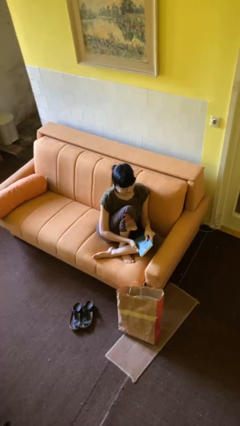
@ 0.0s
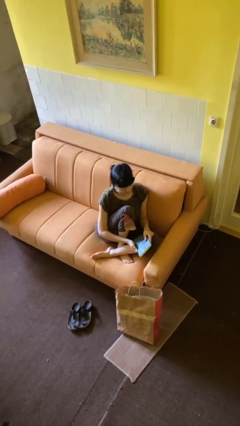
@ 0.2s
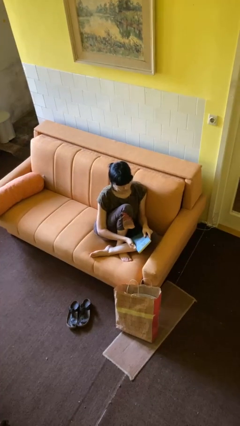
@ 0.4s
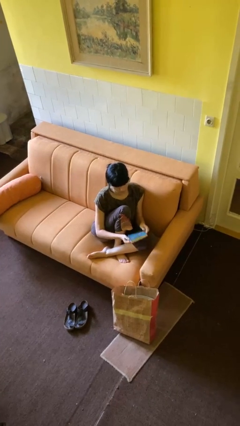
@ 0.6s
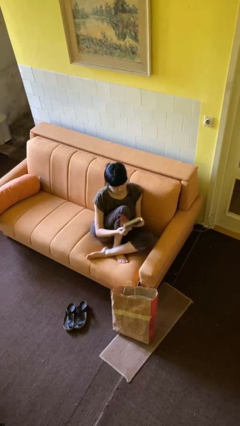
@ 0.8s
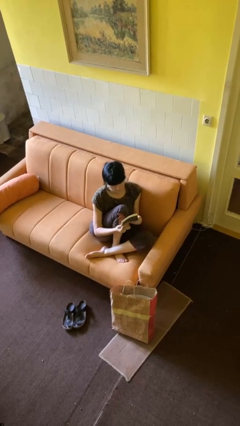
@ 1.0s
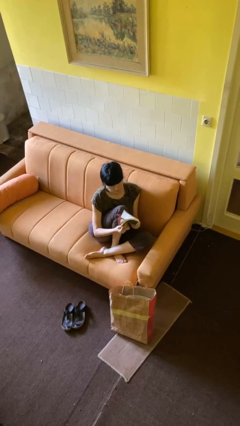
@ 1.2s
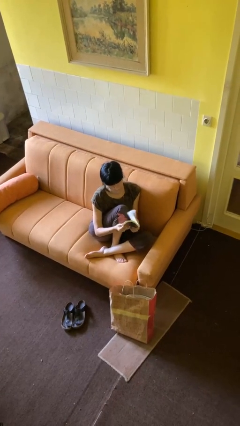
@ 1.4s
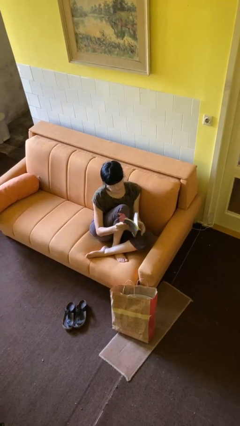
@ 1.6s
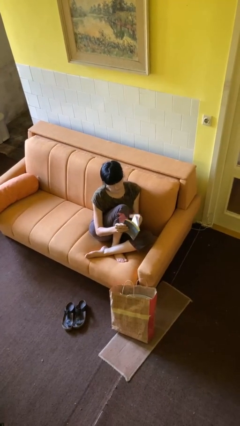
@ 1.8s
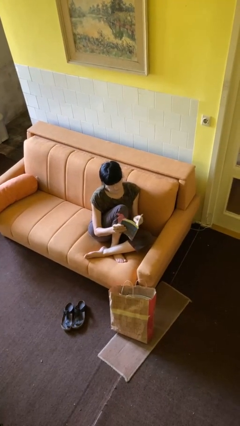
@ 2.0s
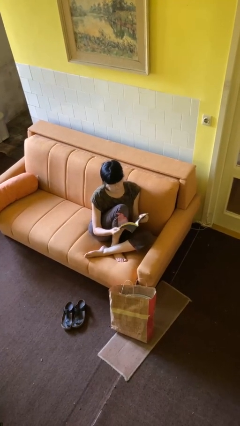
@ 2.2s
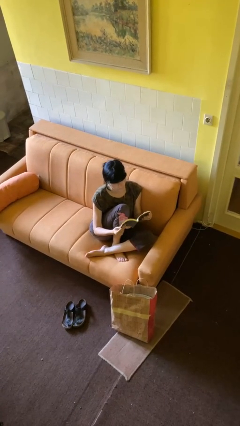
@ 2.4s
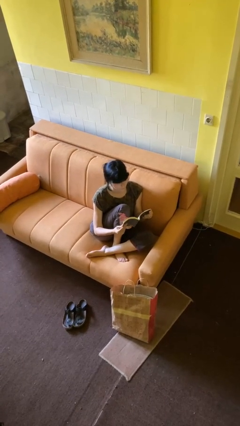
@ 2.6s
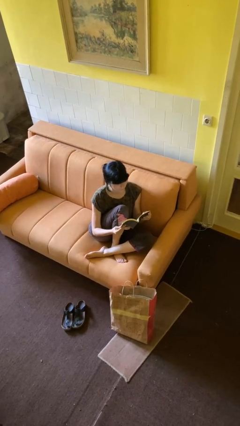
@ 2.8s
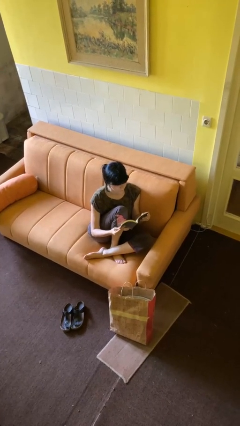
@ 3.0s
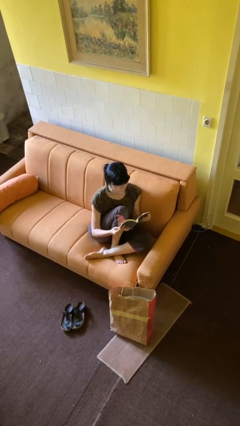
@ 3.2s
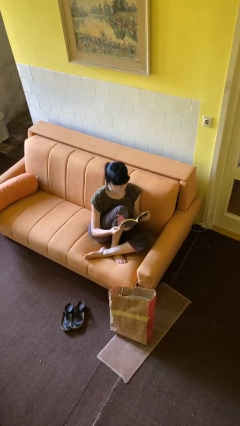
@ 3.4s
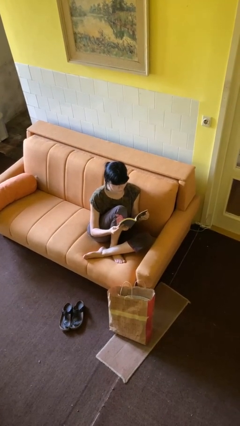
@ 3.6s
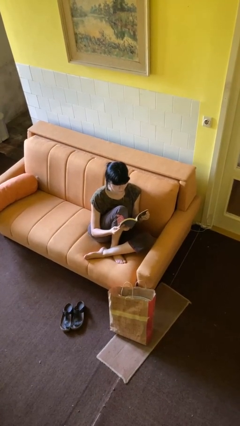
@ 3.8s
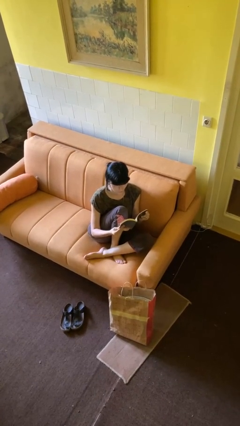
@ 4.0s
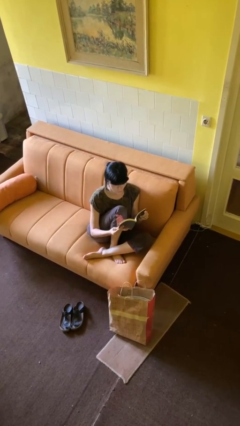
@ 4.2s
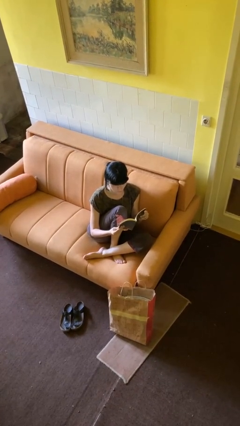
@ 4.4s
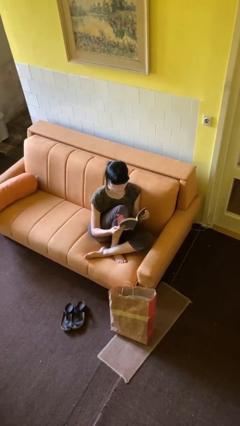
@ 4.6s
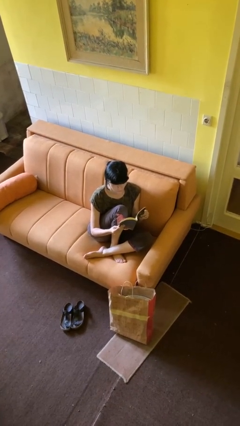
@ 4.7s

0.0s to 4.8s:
person reads book

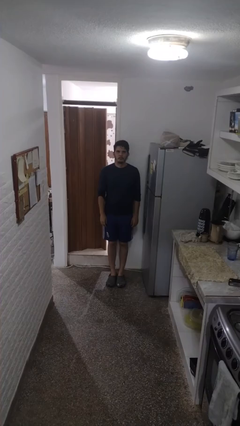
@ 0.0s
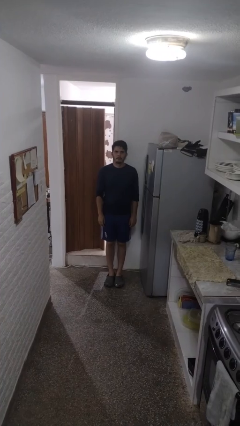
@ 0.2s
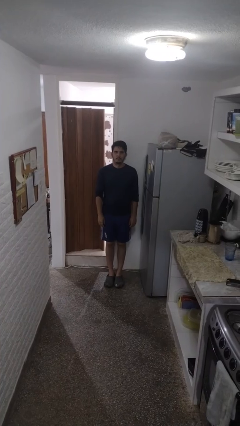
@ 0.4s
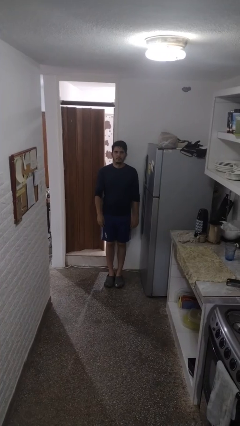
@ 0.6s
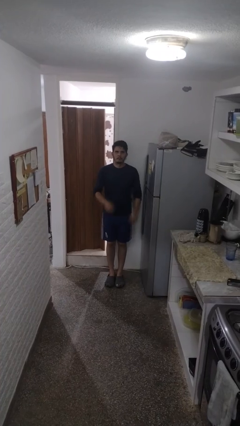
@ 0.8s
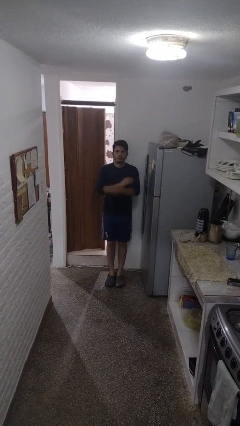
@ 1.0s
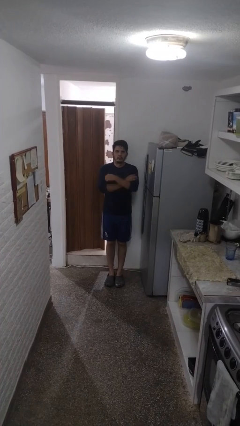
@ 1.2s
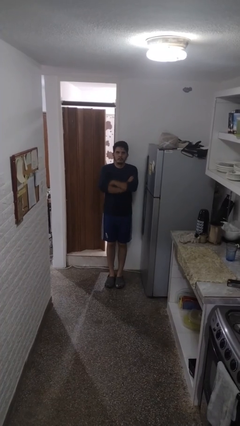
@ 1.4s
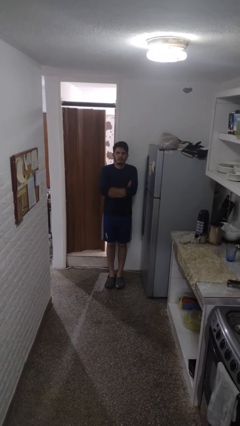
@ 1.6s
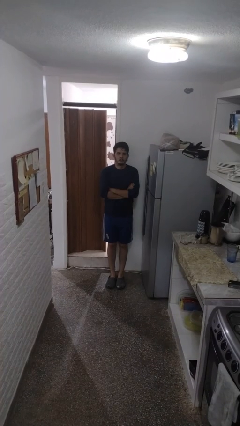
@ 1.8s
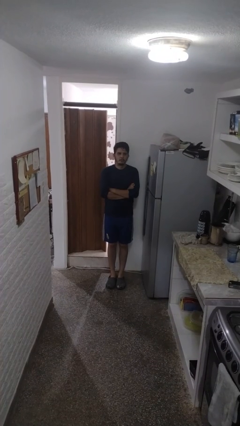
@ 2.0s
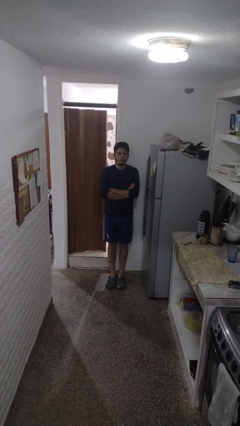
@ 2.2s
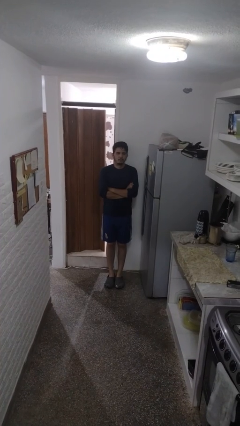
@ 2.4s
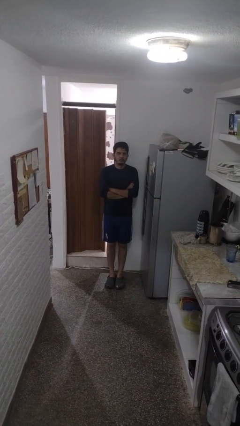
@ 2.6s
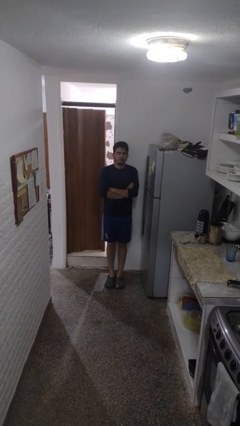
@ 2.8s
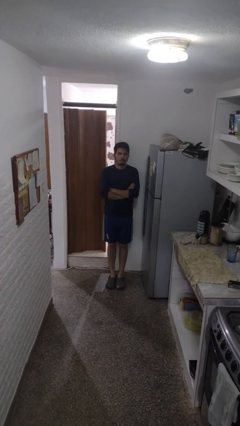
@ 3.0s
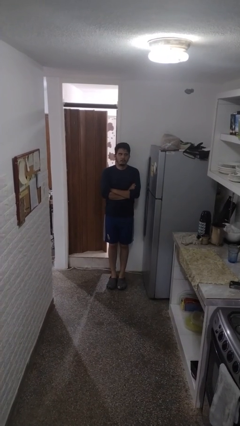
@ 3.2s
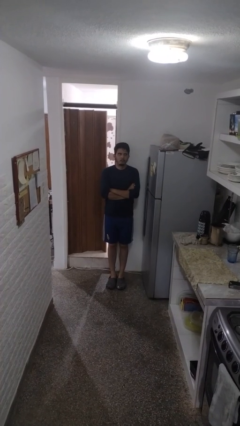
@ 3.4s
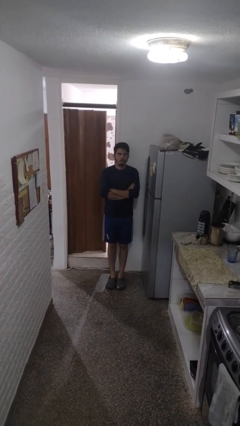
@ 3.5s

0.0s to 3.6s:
person crosses arms

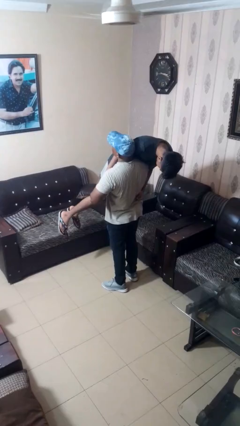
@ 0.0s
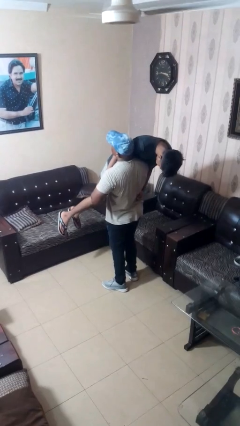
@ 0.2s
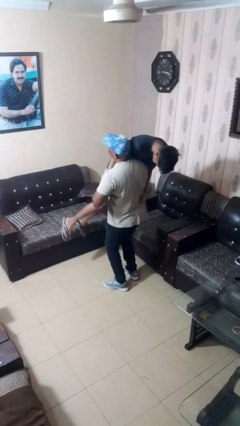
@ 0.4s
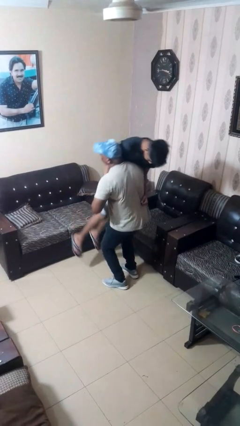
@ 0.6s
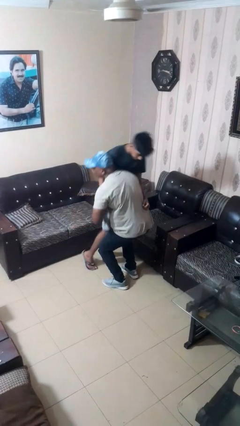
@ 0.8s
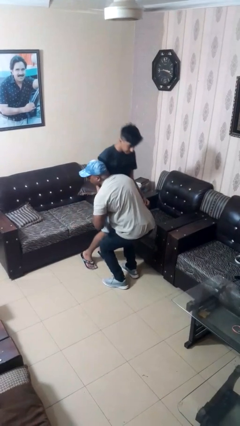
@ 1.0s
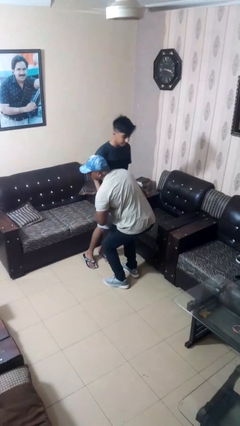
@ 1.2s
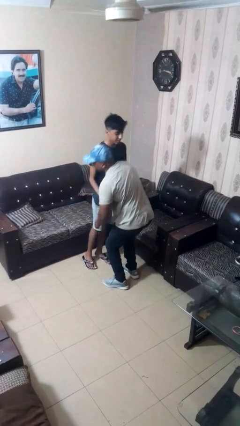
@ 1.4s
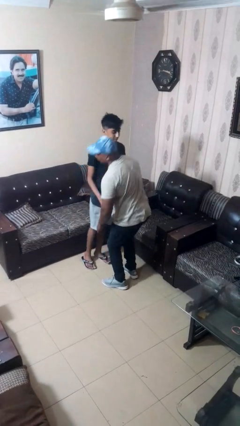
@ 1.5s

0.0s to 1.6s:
person puts down person

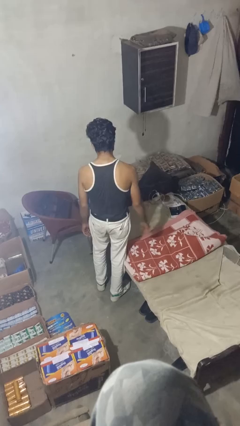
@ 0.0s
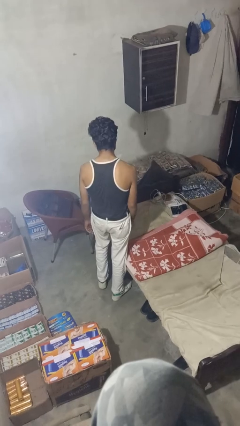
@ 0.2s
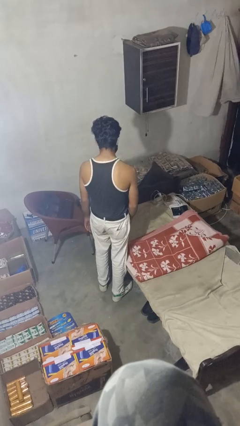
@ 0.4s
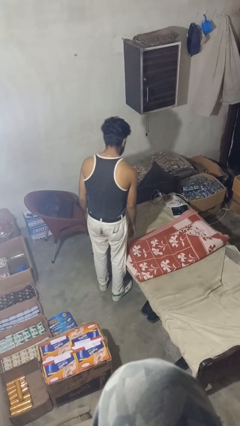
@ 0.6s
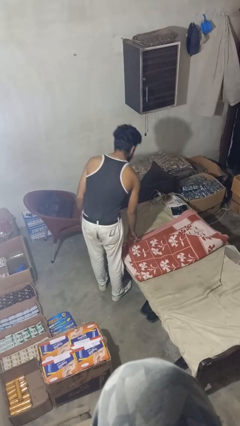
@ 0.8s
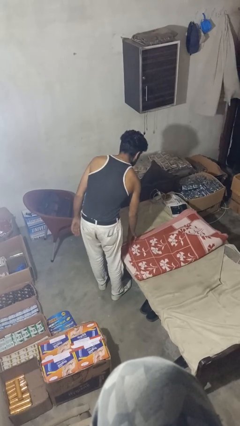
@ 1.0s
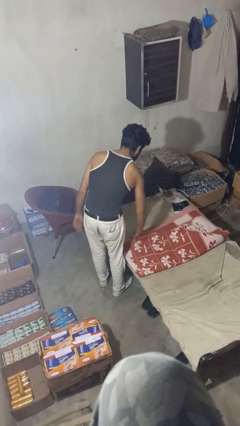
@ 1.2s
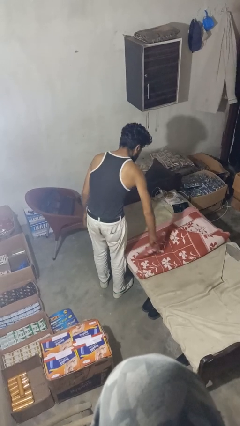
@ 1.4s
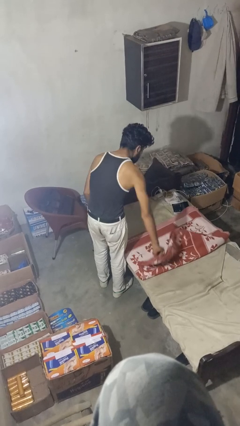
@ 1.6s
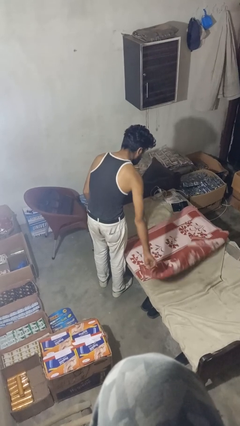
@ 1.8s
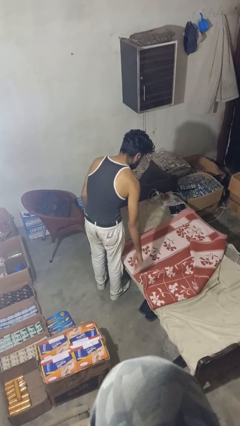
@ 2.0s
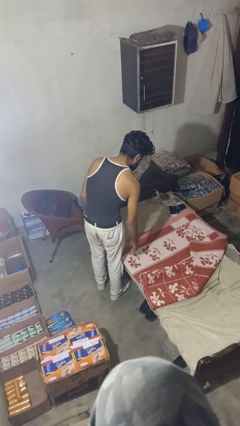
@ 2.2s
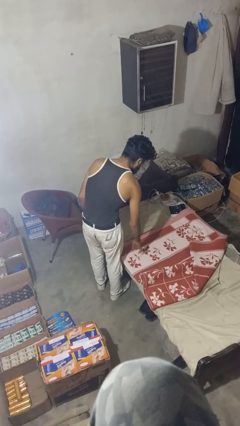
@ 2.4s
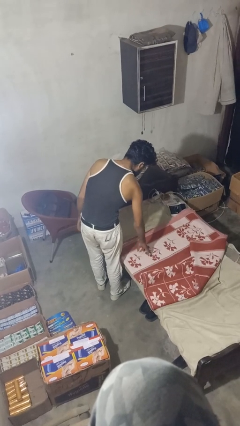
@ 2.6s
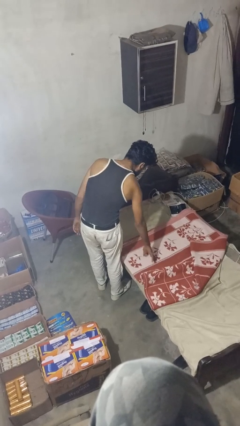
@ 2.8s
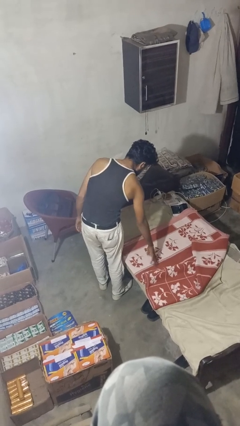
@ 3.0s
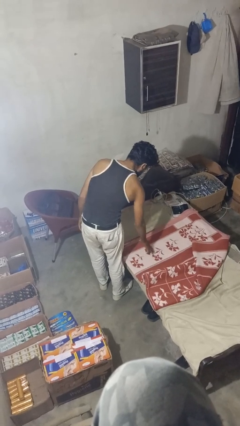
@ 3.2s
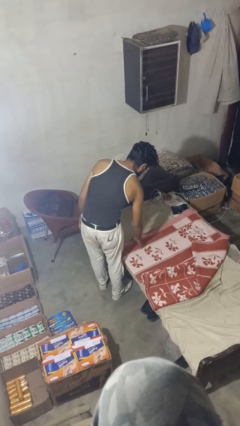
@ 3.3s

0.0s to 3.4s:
person makes bed

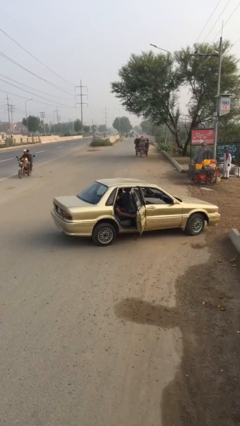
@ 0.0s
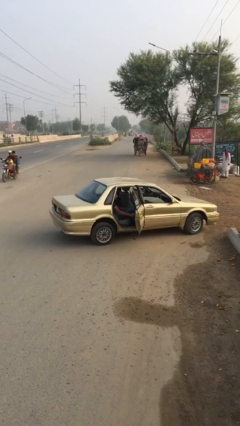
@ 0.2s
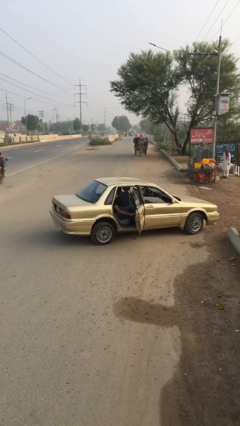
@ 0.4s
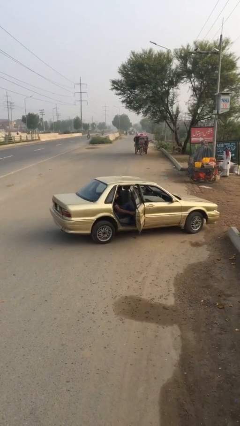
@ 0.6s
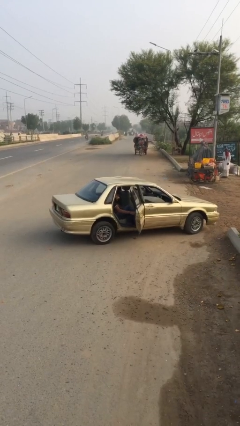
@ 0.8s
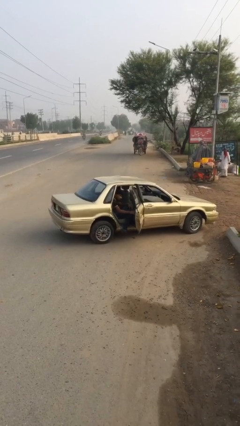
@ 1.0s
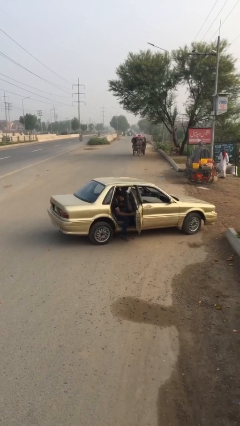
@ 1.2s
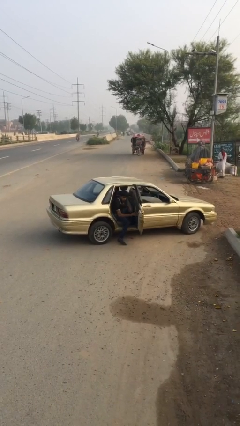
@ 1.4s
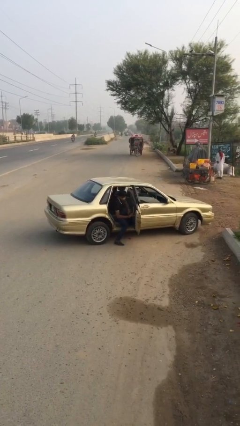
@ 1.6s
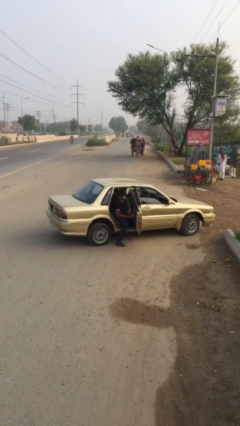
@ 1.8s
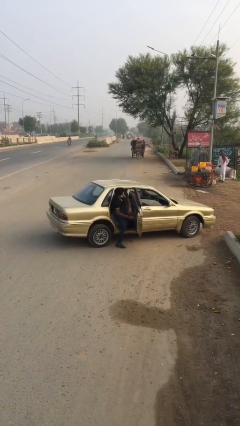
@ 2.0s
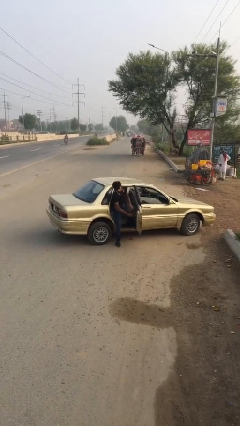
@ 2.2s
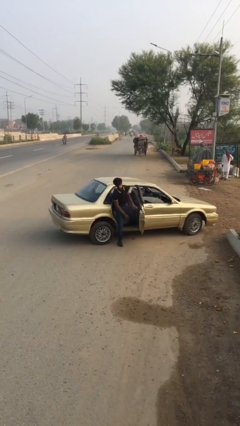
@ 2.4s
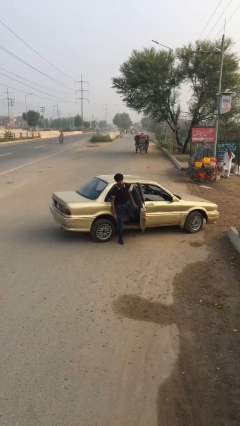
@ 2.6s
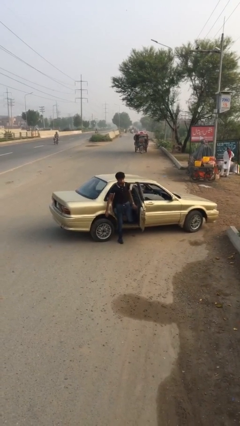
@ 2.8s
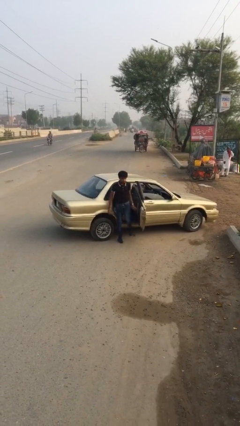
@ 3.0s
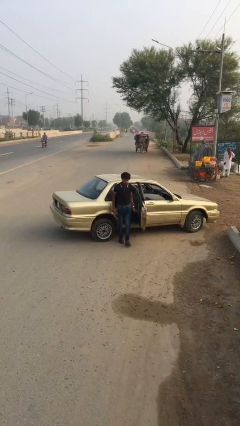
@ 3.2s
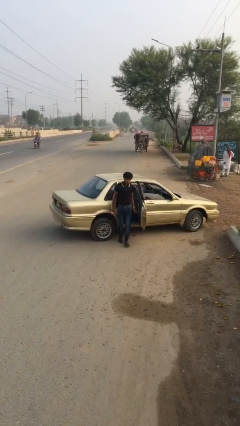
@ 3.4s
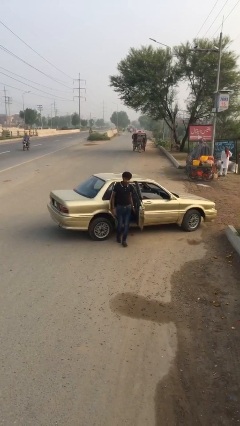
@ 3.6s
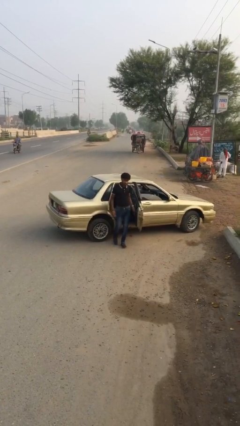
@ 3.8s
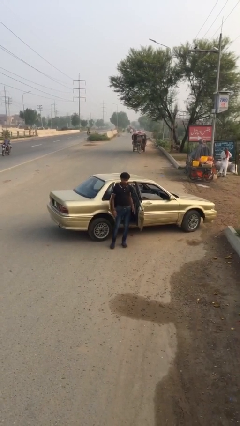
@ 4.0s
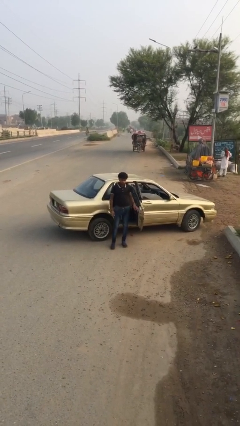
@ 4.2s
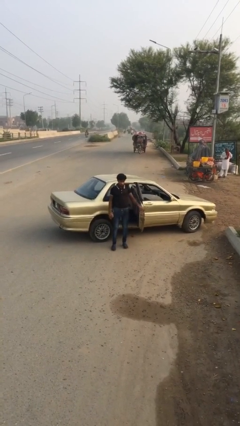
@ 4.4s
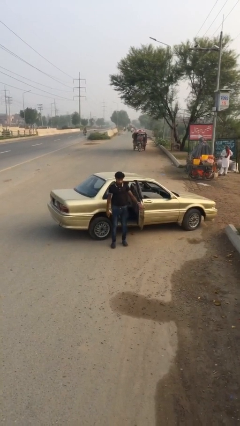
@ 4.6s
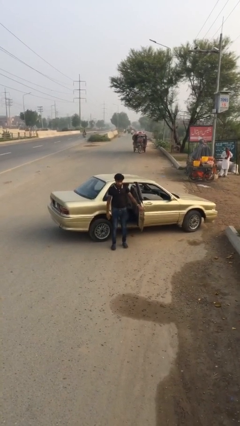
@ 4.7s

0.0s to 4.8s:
person exits car
